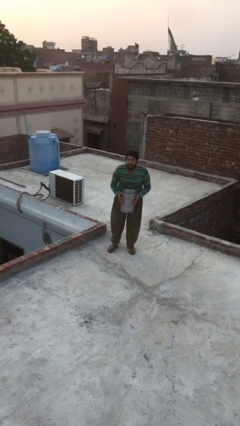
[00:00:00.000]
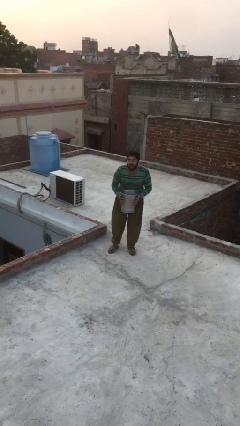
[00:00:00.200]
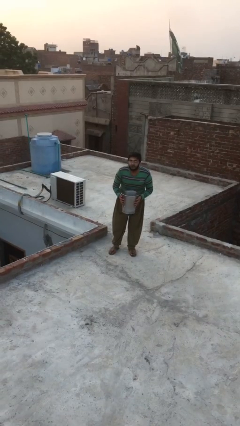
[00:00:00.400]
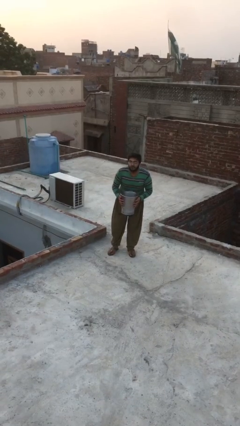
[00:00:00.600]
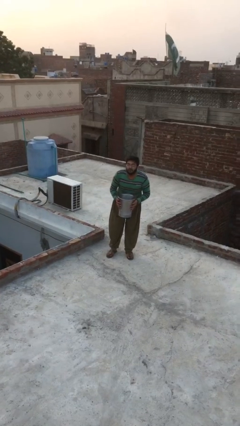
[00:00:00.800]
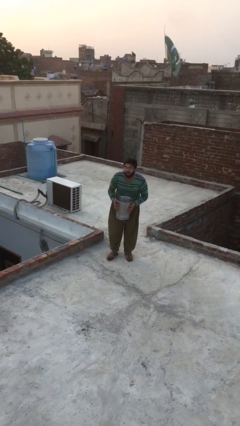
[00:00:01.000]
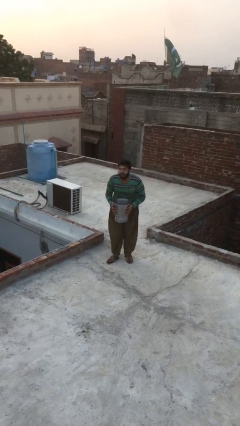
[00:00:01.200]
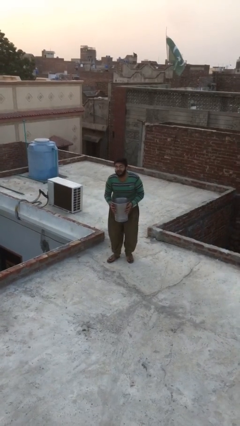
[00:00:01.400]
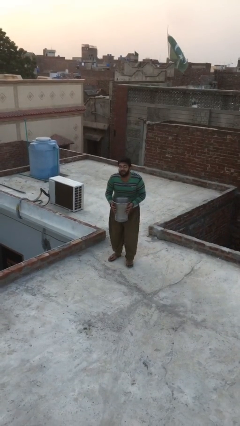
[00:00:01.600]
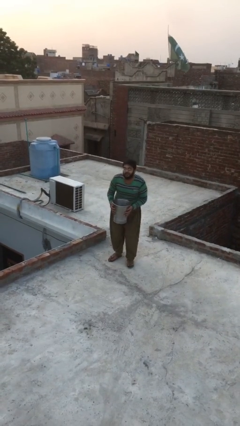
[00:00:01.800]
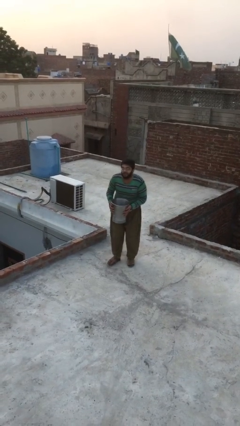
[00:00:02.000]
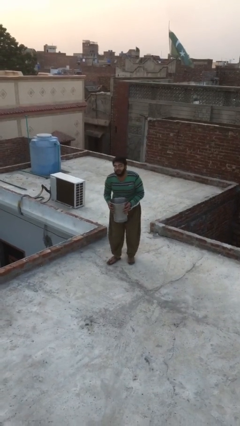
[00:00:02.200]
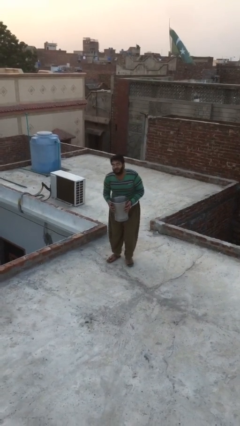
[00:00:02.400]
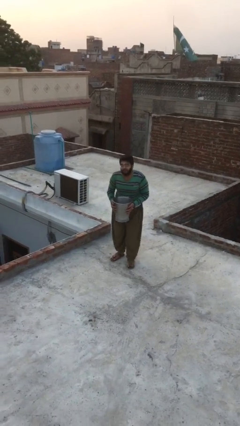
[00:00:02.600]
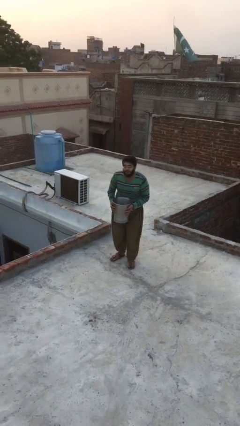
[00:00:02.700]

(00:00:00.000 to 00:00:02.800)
person carries heavy object

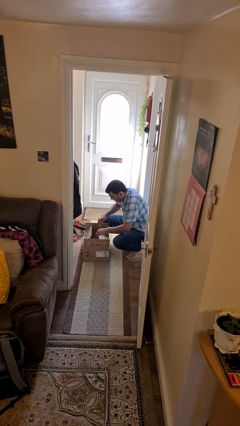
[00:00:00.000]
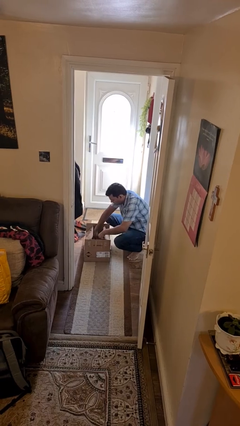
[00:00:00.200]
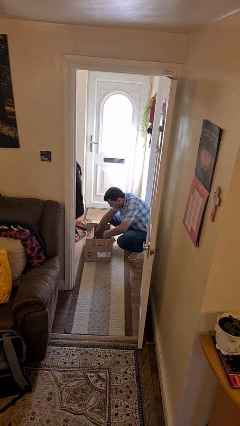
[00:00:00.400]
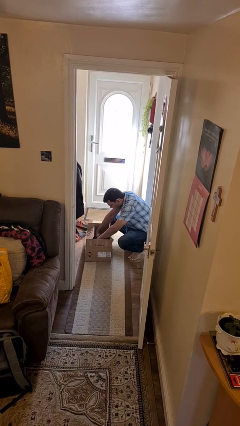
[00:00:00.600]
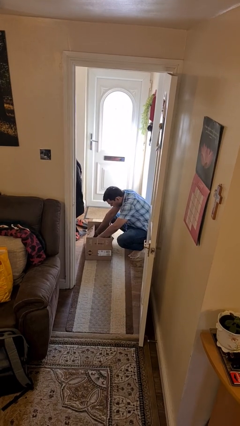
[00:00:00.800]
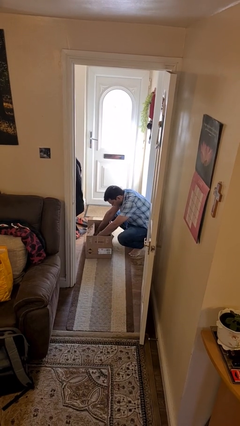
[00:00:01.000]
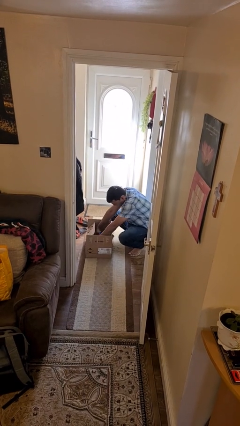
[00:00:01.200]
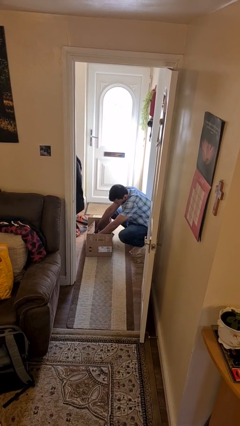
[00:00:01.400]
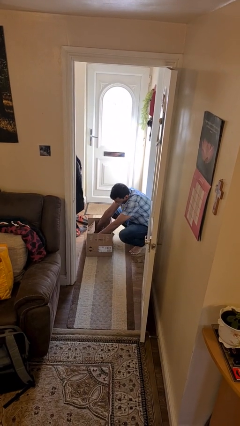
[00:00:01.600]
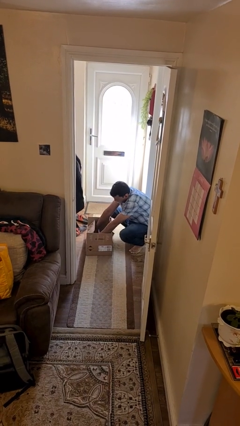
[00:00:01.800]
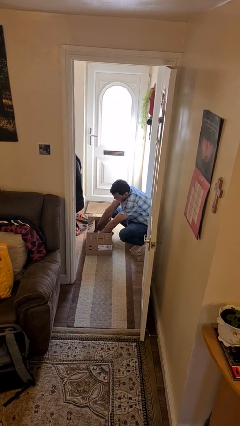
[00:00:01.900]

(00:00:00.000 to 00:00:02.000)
person searches in box

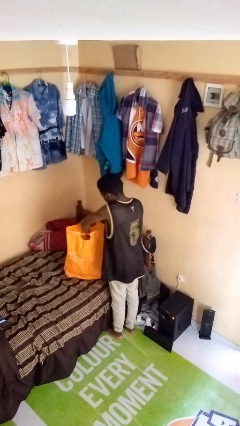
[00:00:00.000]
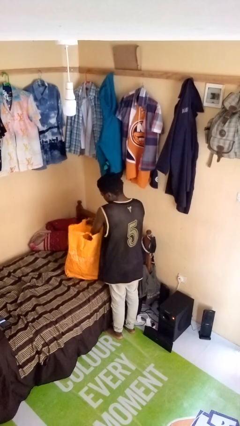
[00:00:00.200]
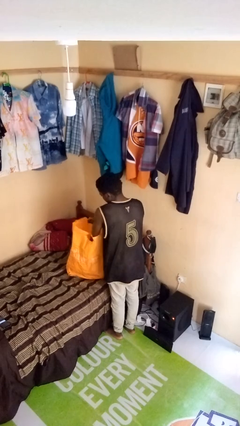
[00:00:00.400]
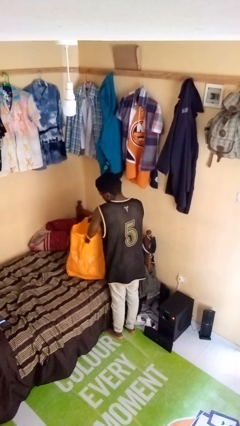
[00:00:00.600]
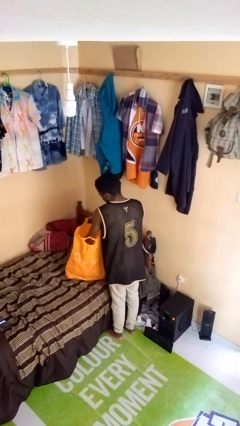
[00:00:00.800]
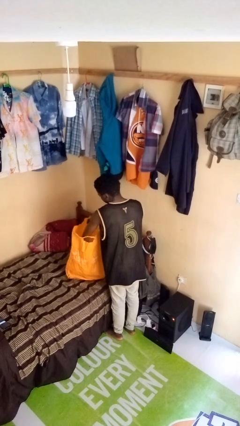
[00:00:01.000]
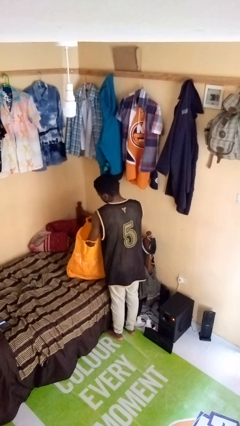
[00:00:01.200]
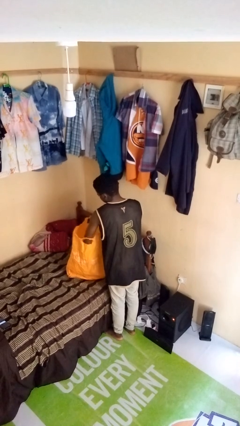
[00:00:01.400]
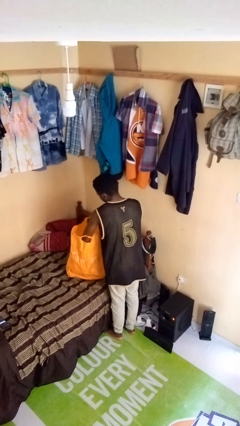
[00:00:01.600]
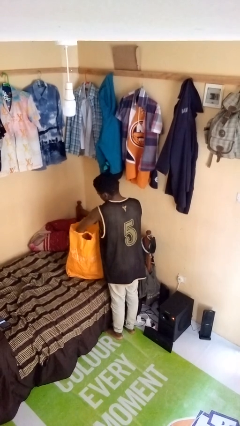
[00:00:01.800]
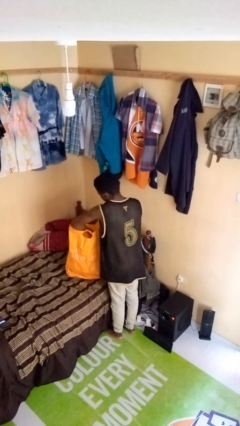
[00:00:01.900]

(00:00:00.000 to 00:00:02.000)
person searches in bag

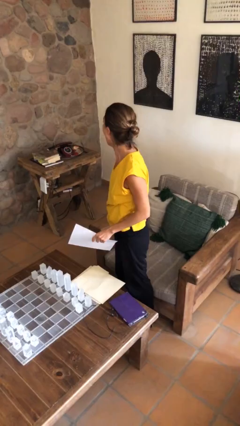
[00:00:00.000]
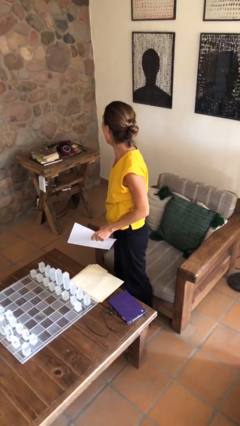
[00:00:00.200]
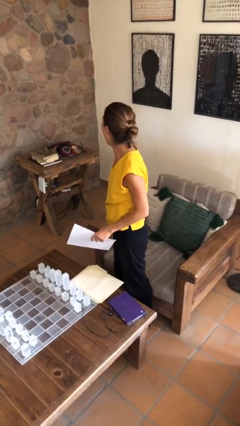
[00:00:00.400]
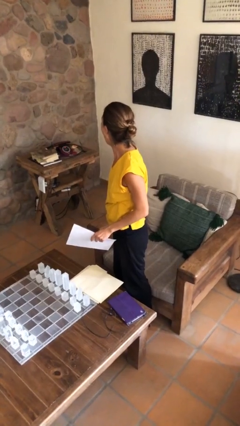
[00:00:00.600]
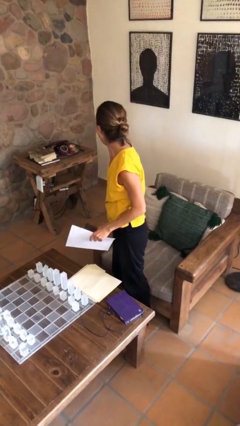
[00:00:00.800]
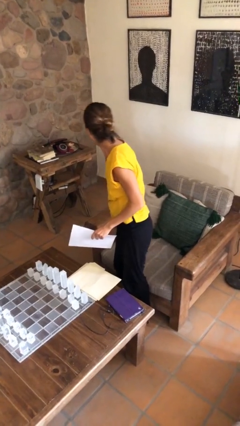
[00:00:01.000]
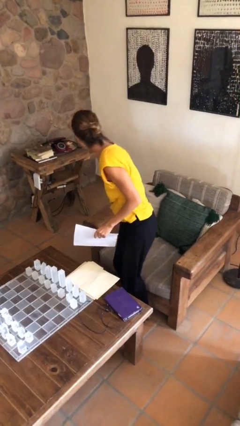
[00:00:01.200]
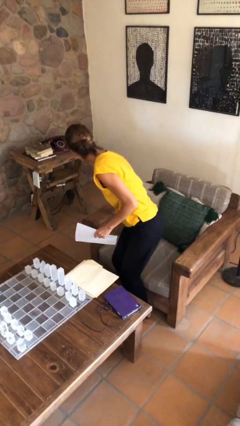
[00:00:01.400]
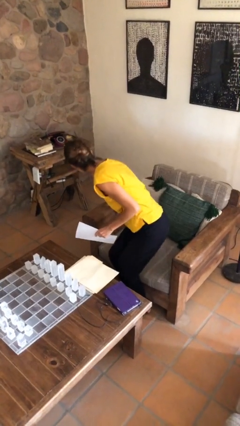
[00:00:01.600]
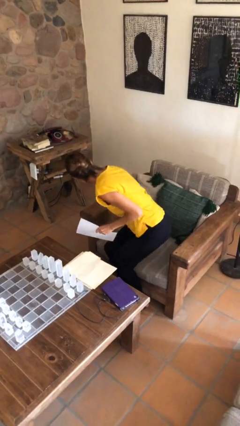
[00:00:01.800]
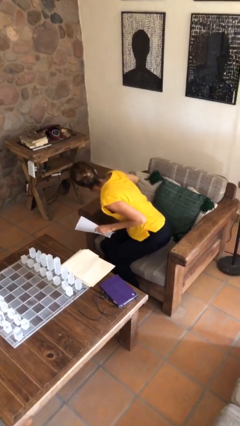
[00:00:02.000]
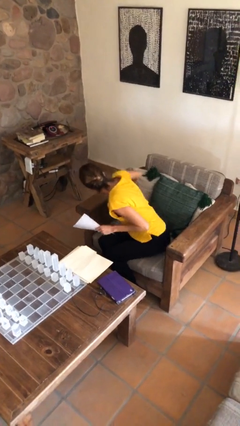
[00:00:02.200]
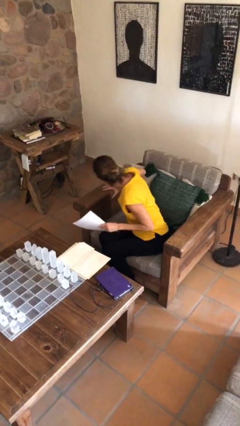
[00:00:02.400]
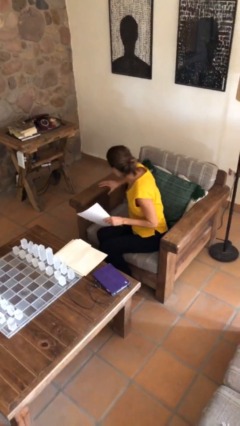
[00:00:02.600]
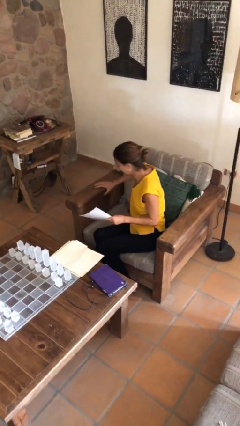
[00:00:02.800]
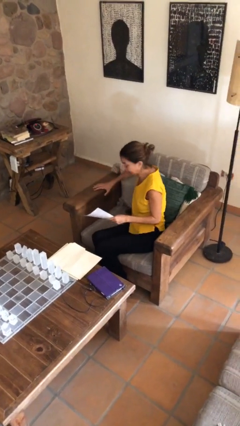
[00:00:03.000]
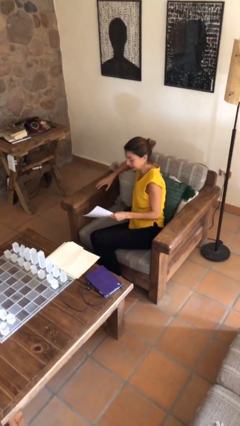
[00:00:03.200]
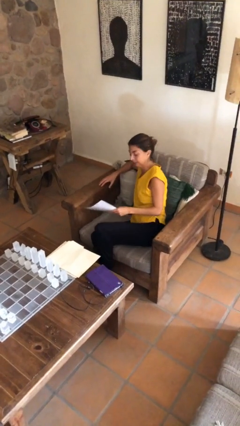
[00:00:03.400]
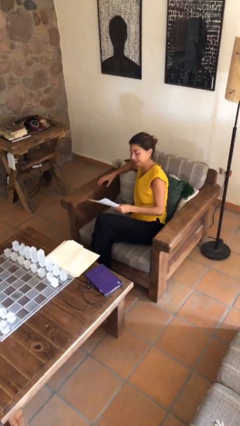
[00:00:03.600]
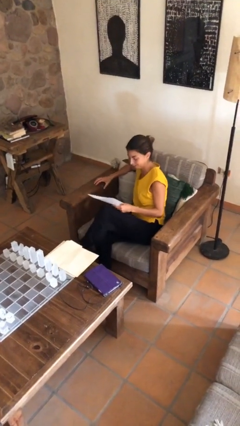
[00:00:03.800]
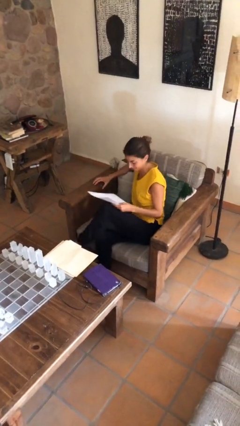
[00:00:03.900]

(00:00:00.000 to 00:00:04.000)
person sits down

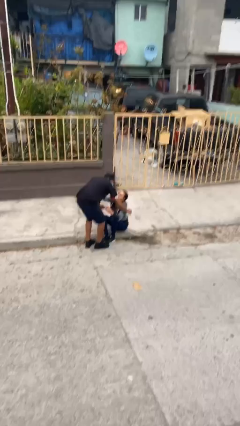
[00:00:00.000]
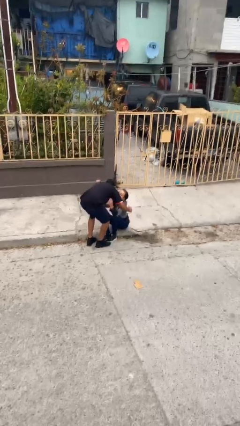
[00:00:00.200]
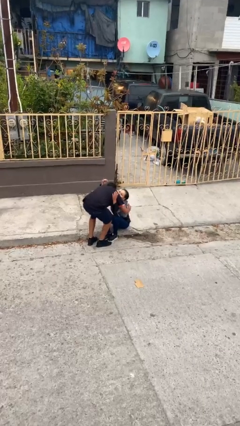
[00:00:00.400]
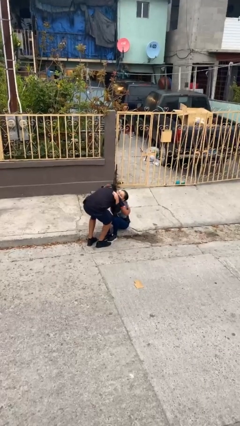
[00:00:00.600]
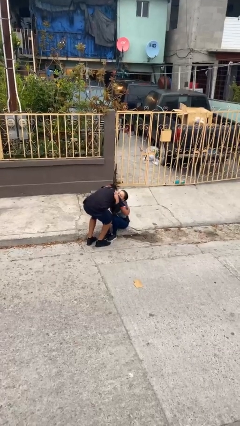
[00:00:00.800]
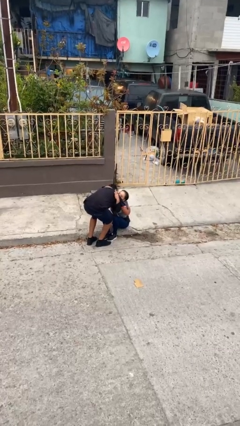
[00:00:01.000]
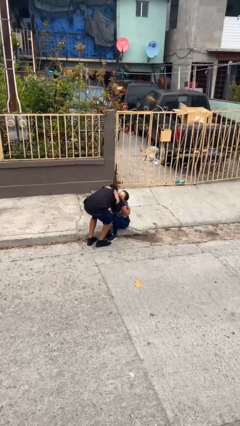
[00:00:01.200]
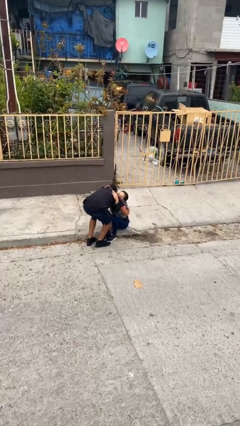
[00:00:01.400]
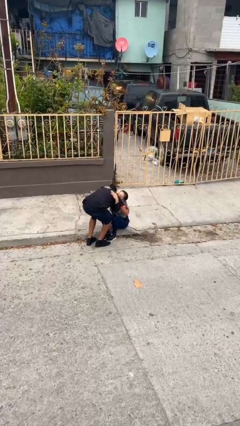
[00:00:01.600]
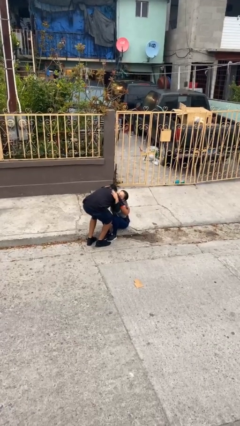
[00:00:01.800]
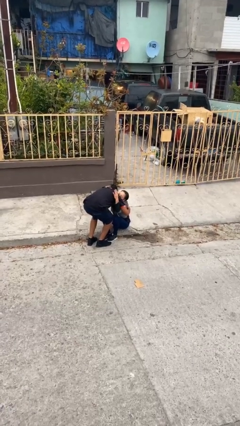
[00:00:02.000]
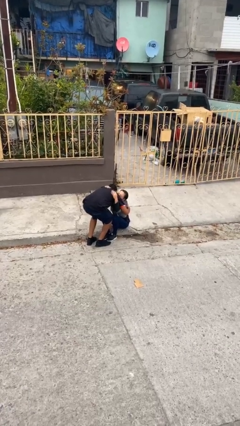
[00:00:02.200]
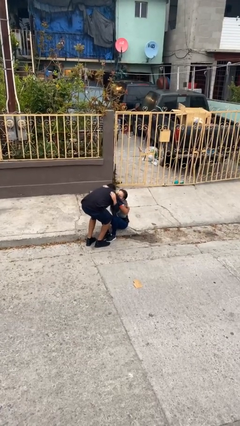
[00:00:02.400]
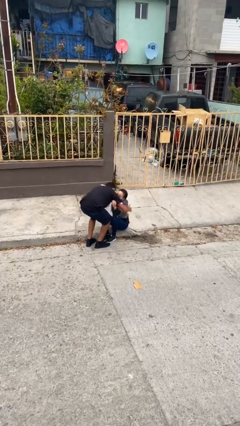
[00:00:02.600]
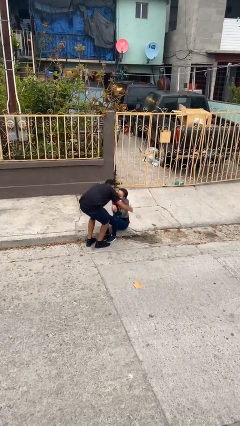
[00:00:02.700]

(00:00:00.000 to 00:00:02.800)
person embraces person

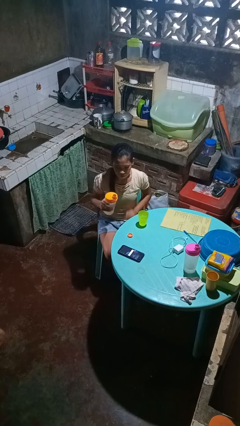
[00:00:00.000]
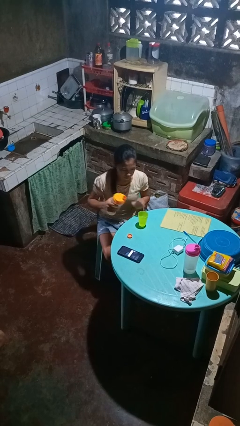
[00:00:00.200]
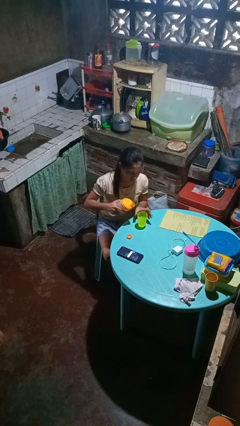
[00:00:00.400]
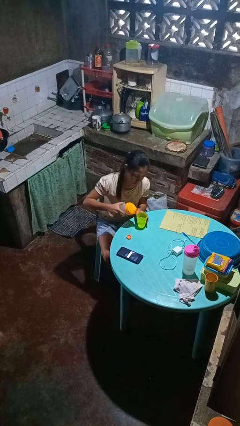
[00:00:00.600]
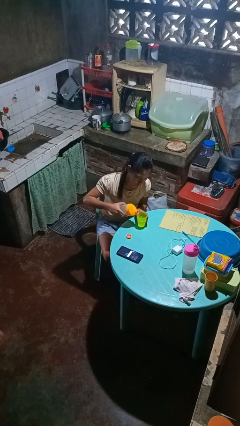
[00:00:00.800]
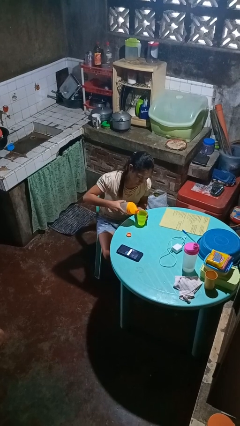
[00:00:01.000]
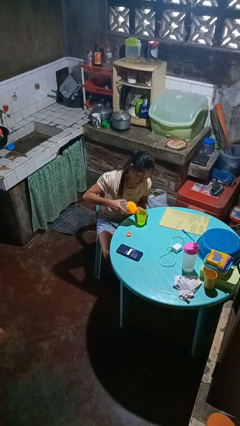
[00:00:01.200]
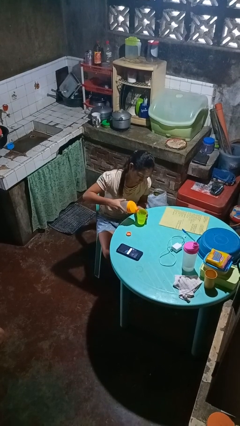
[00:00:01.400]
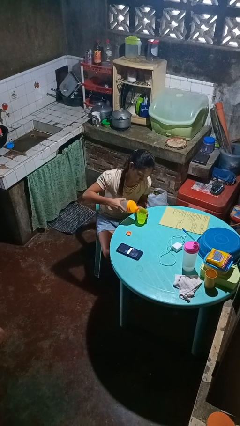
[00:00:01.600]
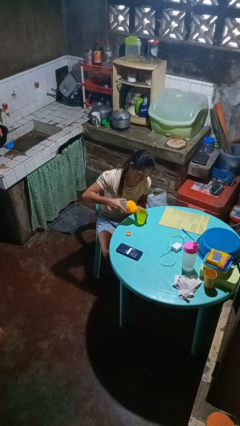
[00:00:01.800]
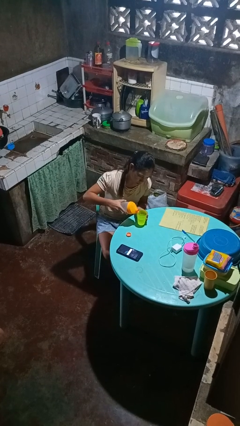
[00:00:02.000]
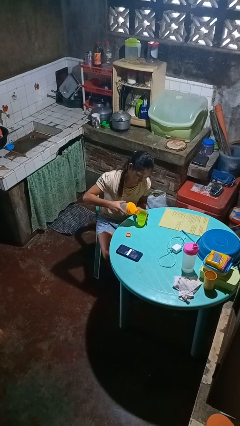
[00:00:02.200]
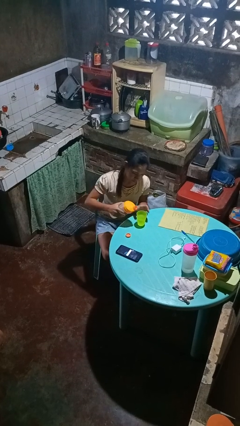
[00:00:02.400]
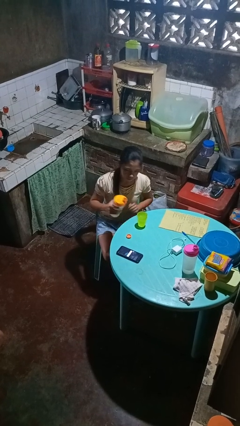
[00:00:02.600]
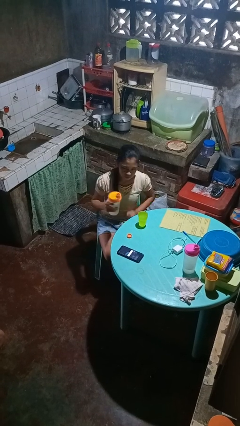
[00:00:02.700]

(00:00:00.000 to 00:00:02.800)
person pours liquid into cup

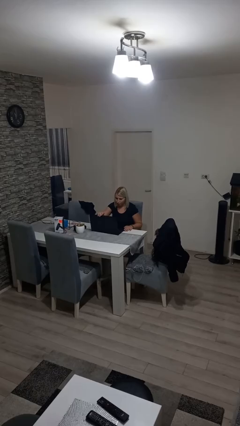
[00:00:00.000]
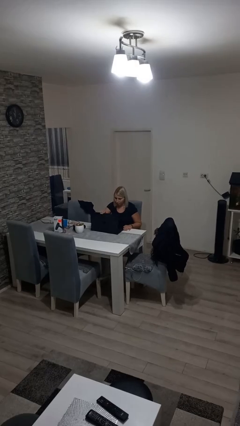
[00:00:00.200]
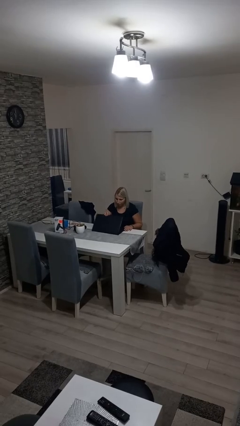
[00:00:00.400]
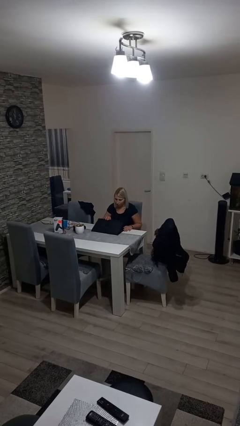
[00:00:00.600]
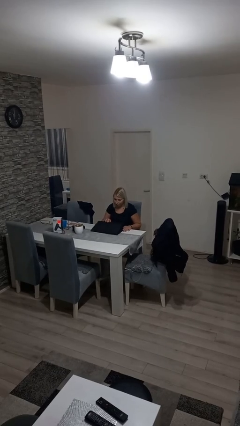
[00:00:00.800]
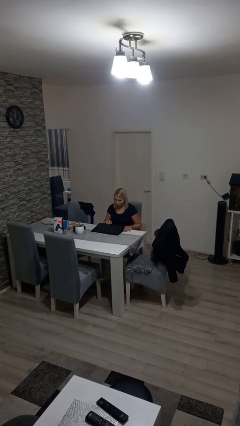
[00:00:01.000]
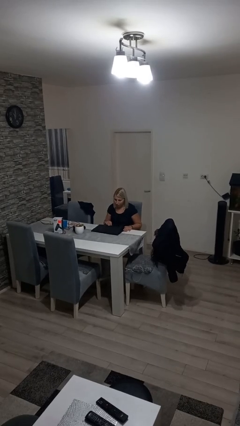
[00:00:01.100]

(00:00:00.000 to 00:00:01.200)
person closes laptop
